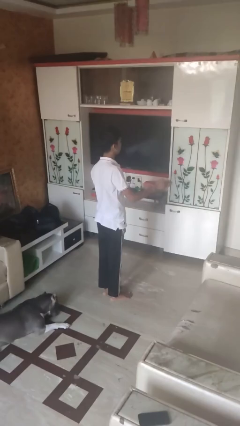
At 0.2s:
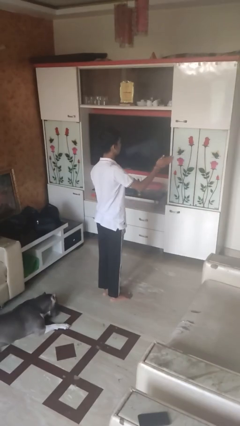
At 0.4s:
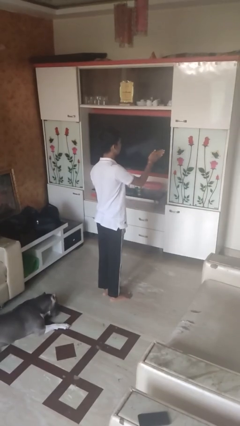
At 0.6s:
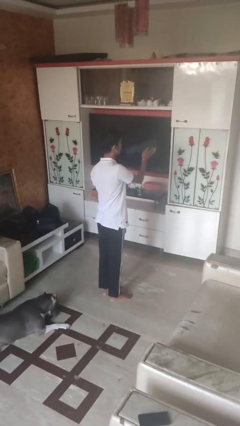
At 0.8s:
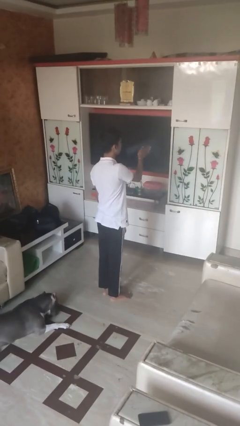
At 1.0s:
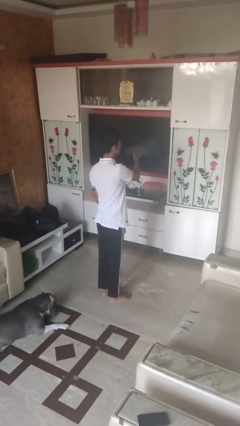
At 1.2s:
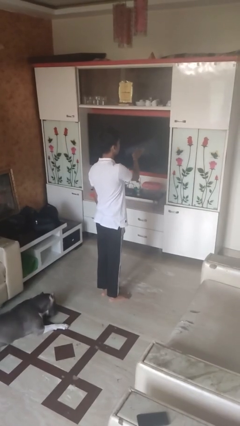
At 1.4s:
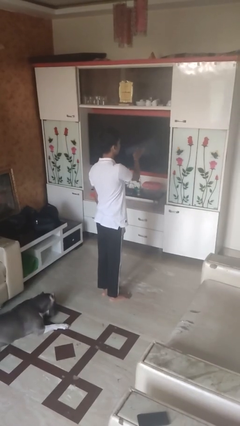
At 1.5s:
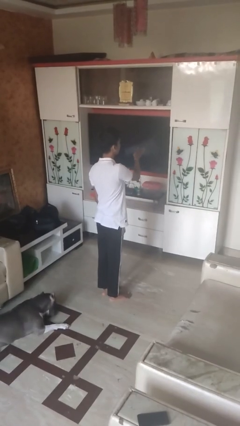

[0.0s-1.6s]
person gestures swipe left

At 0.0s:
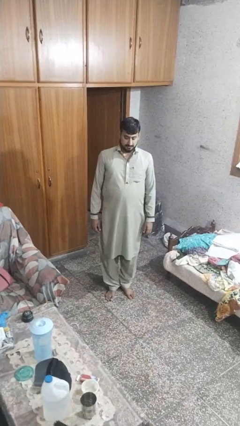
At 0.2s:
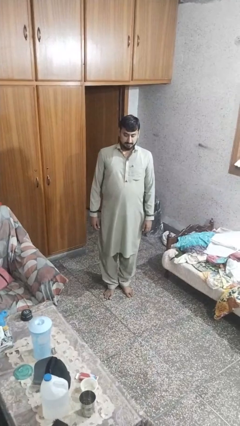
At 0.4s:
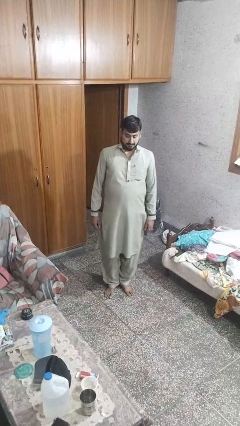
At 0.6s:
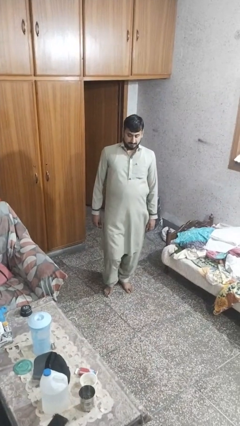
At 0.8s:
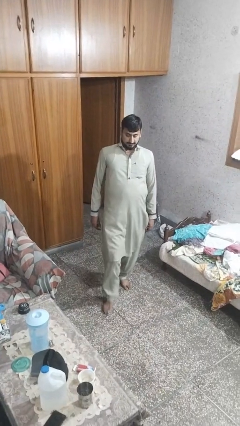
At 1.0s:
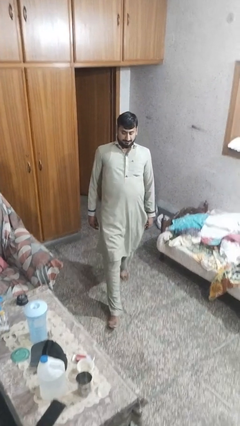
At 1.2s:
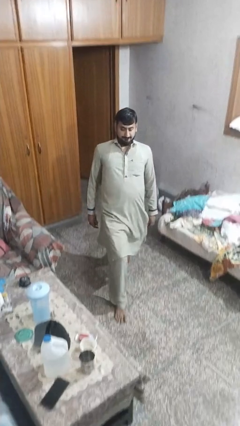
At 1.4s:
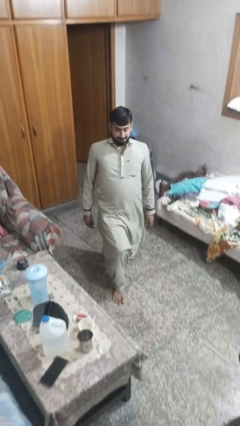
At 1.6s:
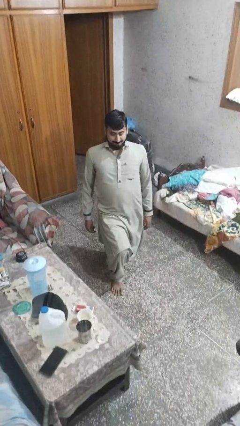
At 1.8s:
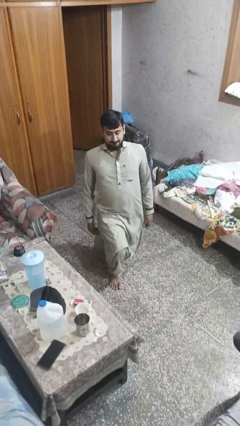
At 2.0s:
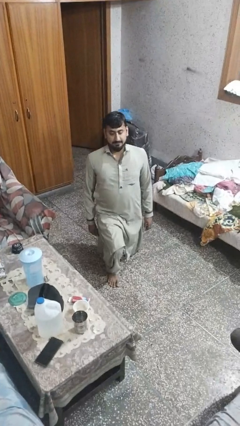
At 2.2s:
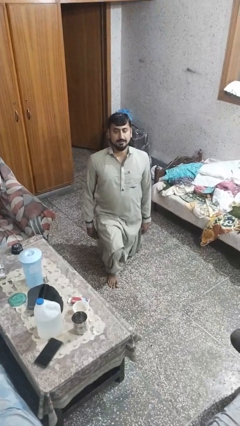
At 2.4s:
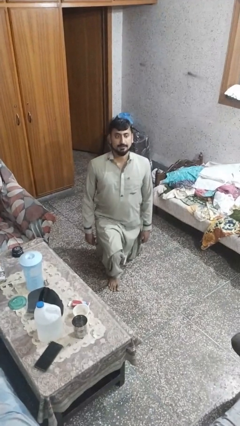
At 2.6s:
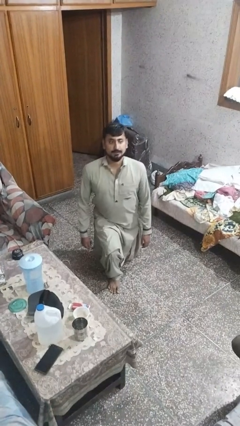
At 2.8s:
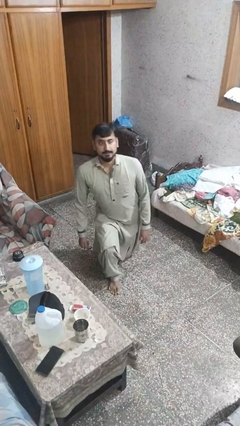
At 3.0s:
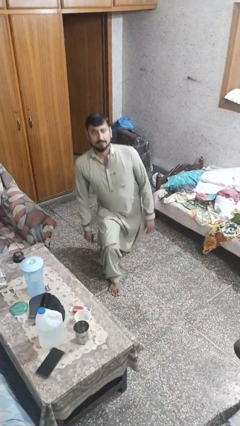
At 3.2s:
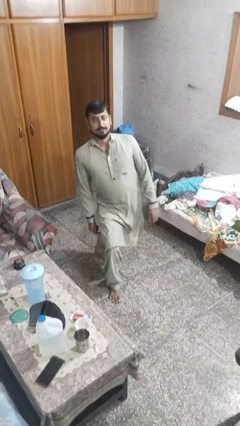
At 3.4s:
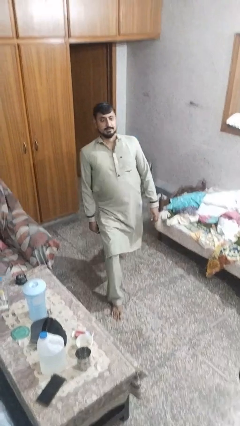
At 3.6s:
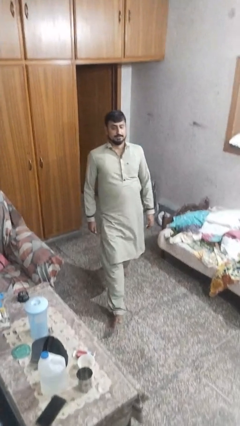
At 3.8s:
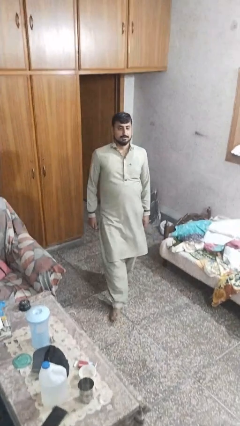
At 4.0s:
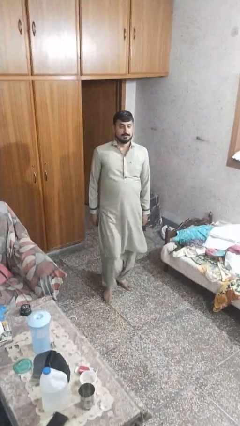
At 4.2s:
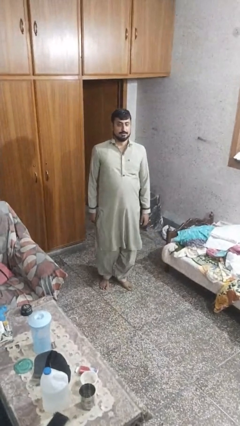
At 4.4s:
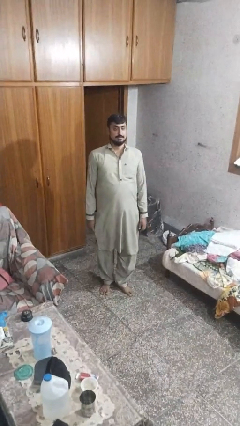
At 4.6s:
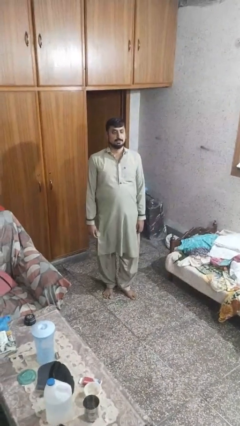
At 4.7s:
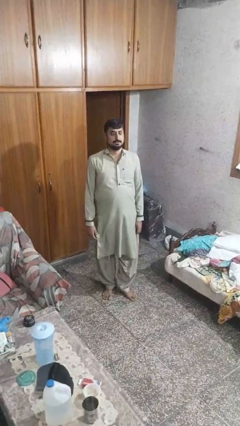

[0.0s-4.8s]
person exercises with lunges

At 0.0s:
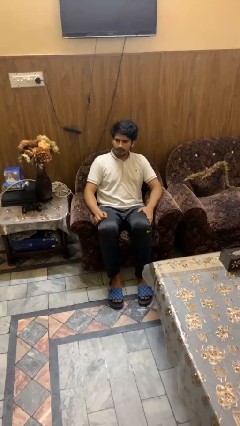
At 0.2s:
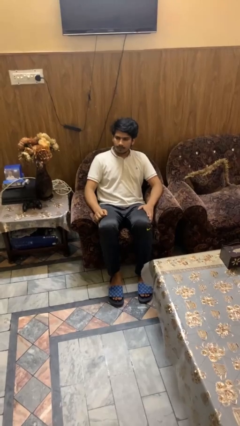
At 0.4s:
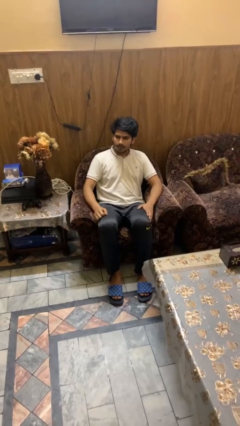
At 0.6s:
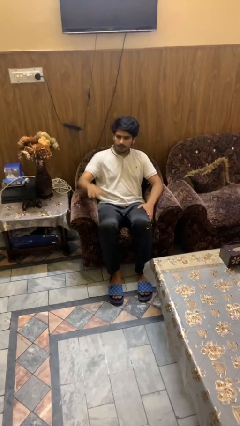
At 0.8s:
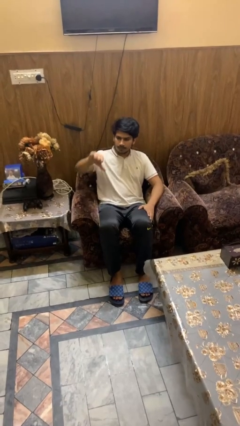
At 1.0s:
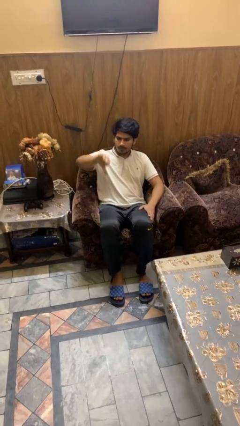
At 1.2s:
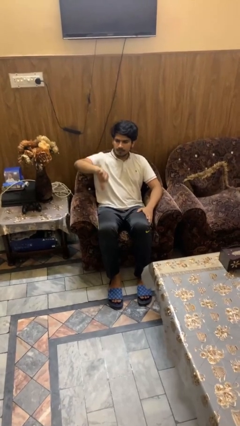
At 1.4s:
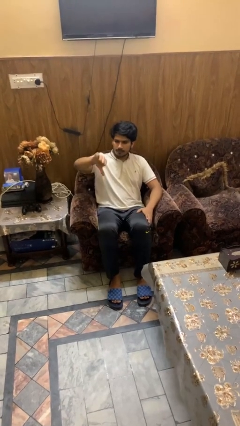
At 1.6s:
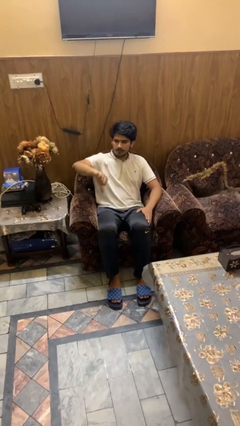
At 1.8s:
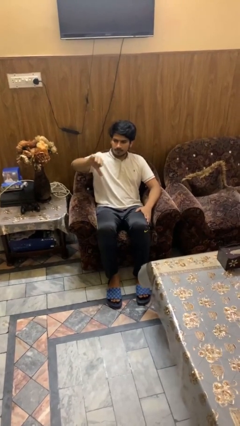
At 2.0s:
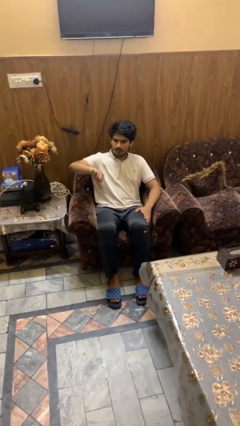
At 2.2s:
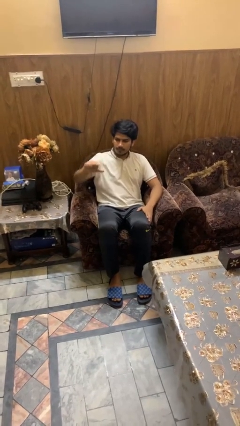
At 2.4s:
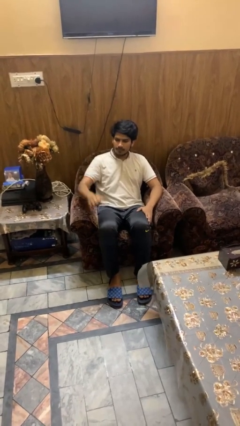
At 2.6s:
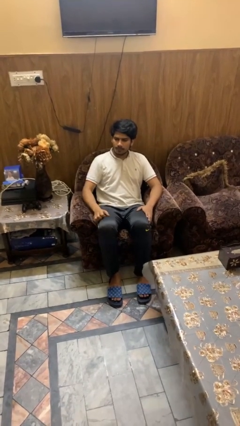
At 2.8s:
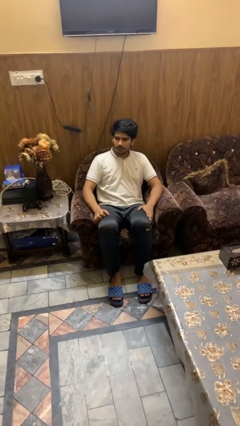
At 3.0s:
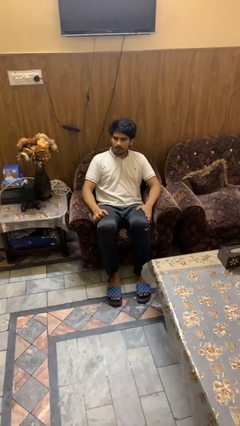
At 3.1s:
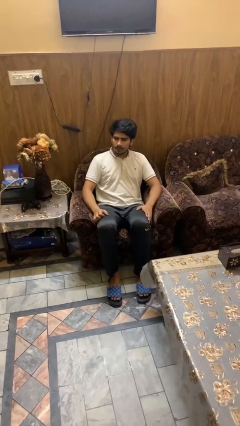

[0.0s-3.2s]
person gestures thumbs down

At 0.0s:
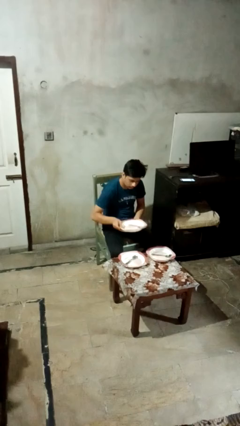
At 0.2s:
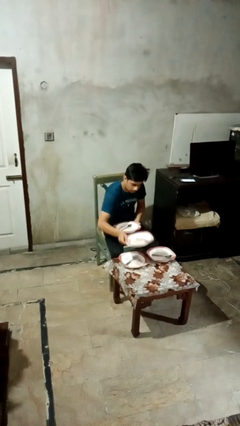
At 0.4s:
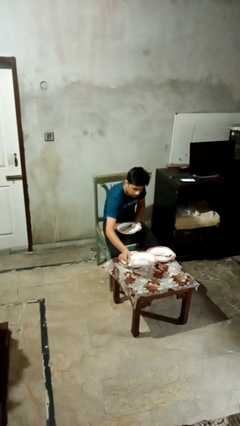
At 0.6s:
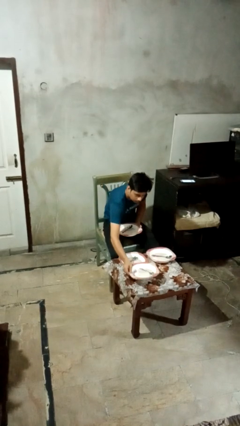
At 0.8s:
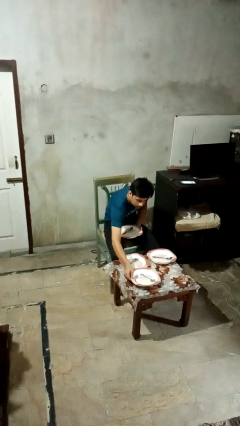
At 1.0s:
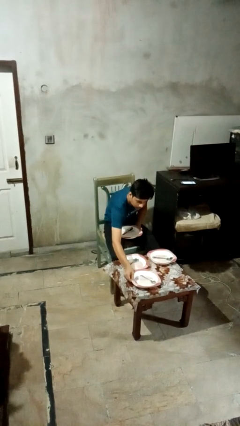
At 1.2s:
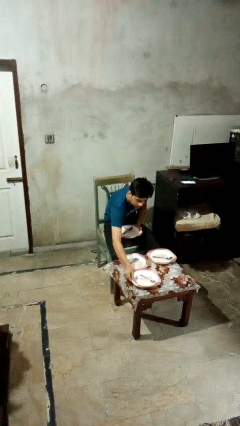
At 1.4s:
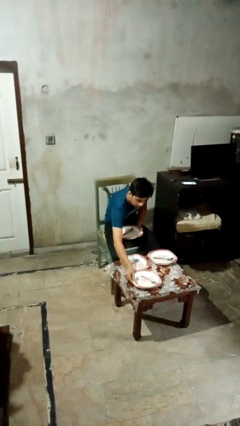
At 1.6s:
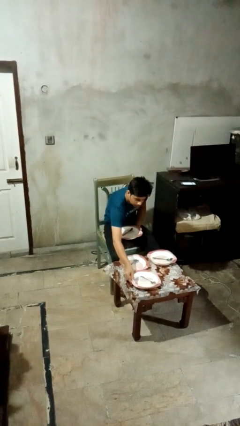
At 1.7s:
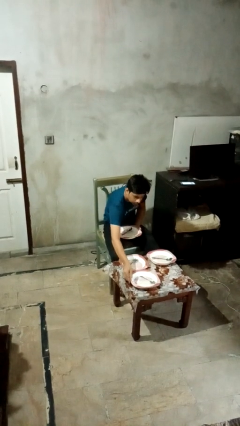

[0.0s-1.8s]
person sets table

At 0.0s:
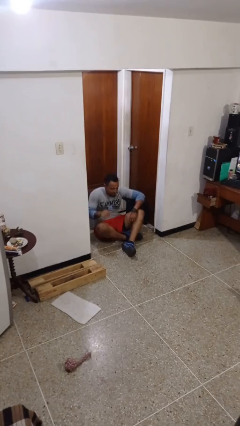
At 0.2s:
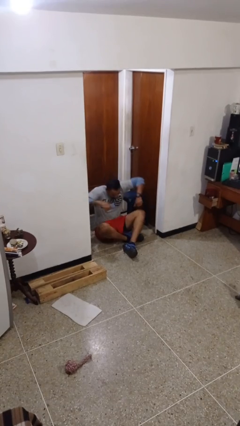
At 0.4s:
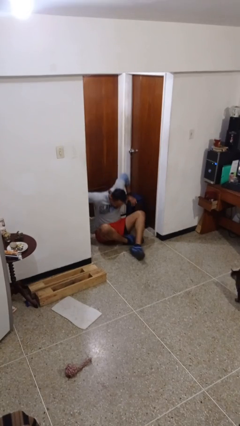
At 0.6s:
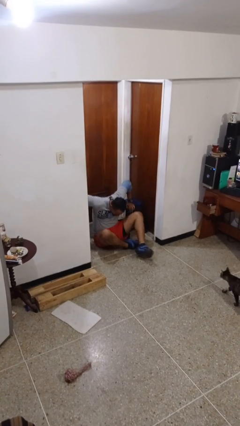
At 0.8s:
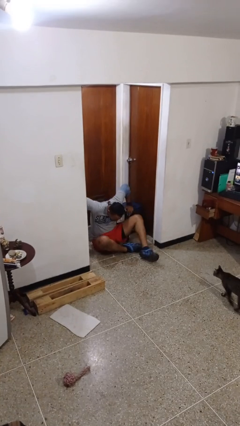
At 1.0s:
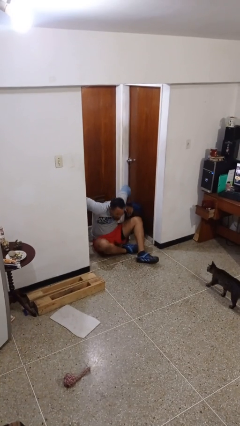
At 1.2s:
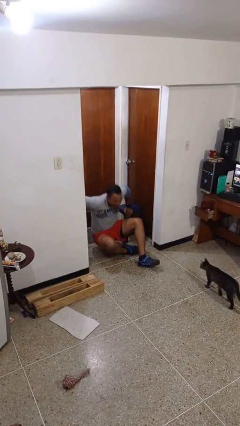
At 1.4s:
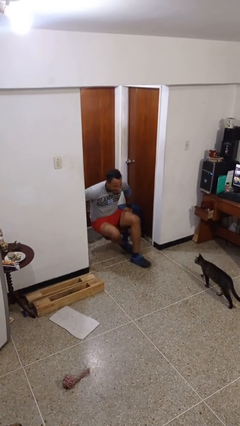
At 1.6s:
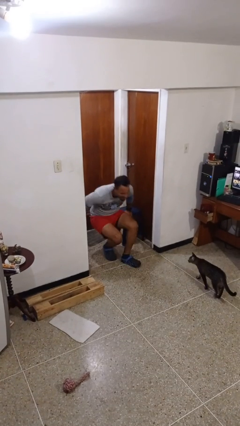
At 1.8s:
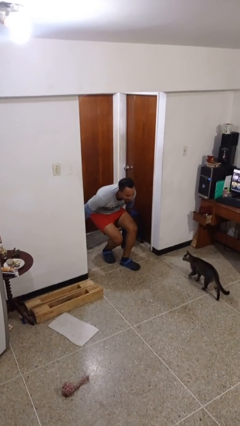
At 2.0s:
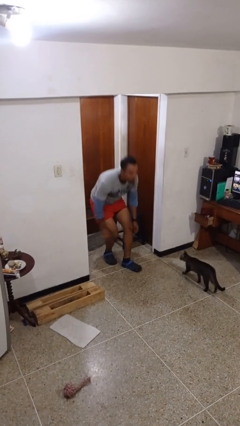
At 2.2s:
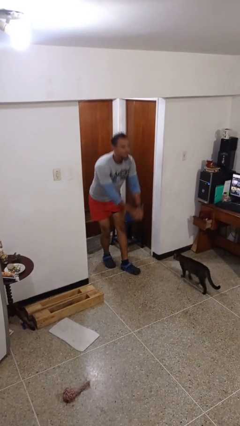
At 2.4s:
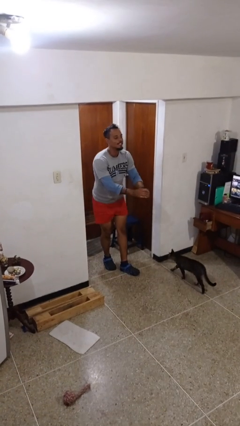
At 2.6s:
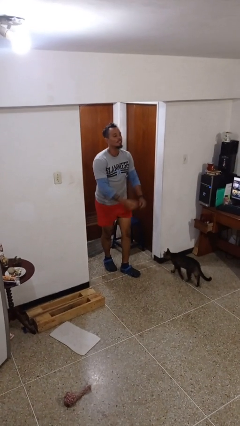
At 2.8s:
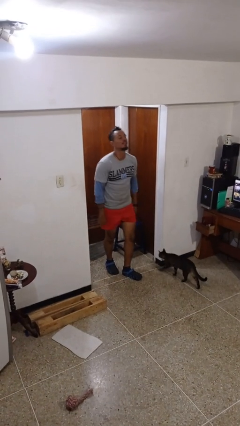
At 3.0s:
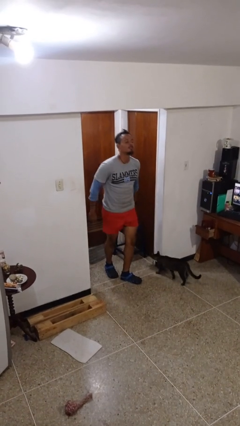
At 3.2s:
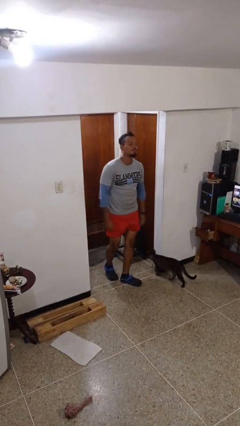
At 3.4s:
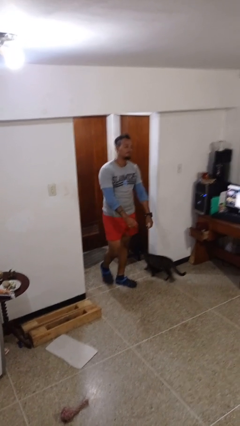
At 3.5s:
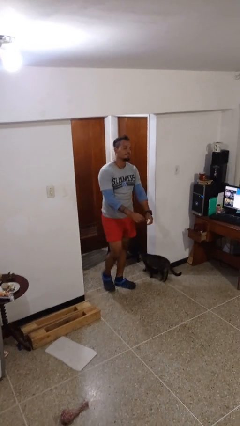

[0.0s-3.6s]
person stands up from floor

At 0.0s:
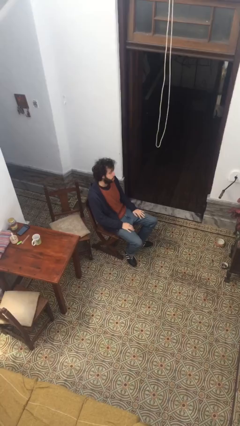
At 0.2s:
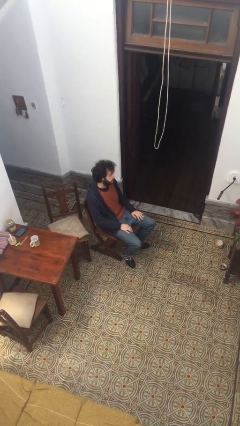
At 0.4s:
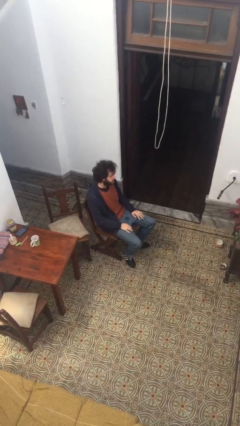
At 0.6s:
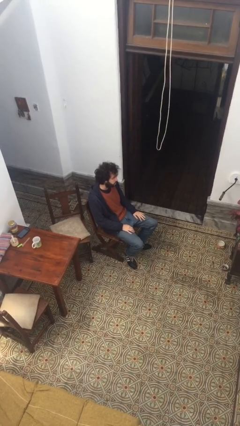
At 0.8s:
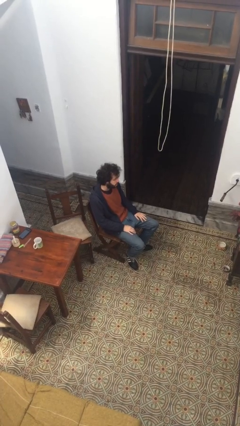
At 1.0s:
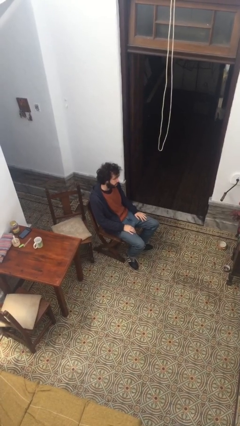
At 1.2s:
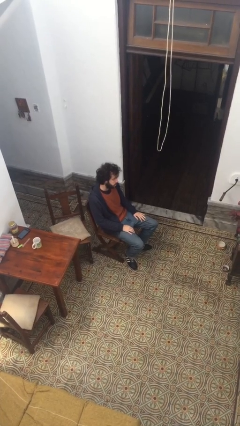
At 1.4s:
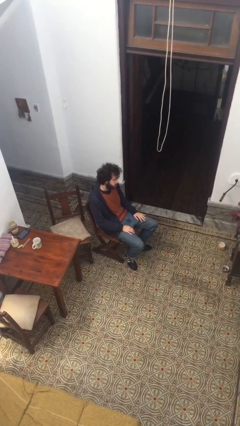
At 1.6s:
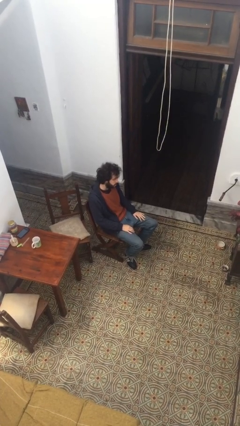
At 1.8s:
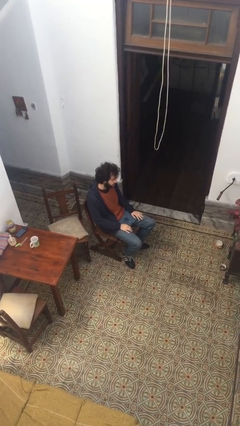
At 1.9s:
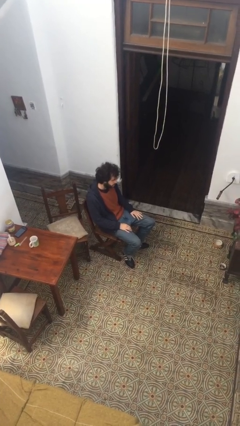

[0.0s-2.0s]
person sits down

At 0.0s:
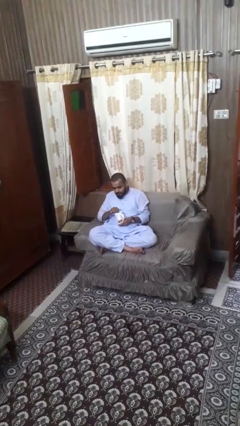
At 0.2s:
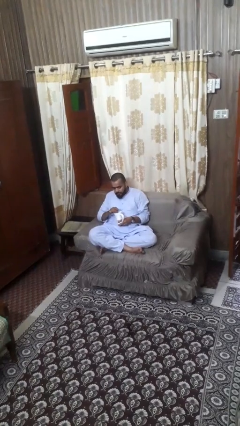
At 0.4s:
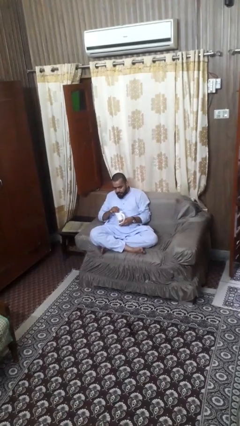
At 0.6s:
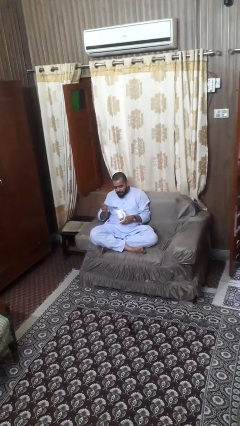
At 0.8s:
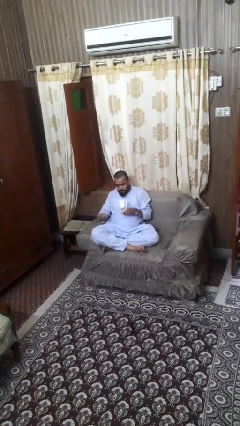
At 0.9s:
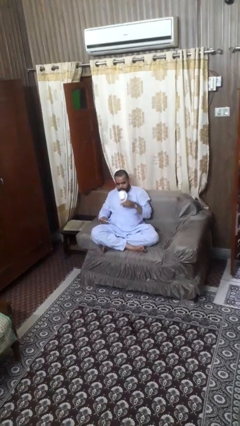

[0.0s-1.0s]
person stirs mug
